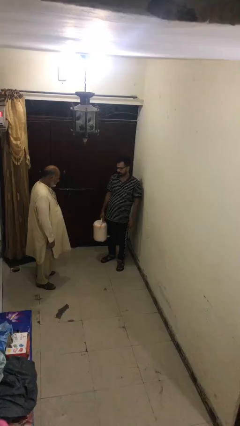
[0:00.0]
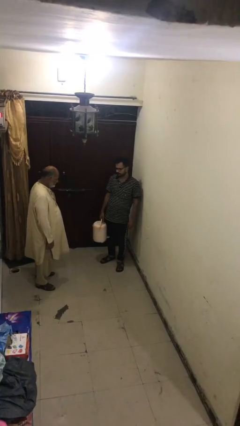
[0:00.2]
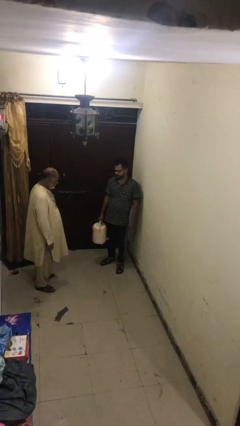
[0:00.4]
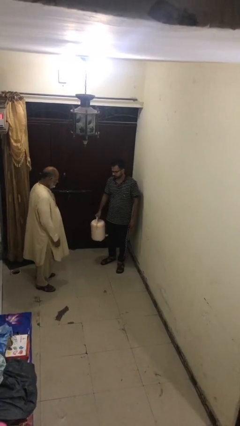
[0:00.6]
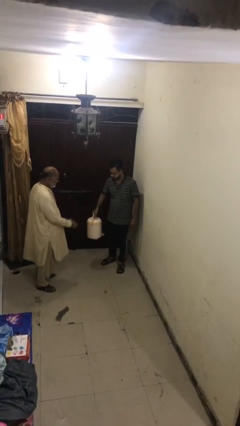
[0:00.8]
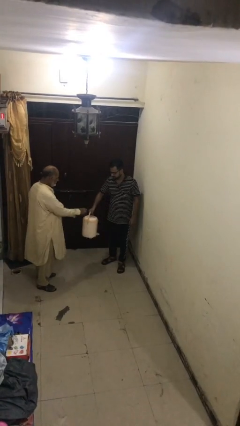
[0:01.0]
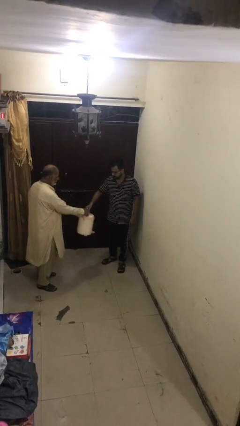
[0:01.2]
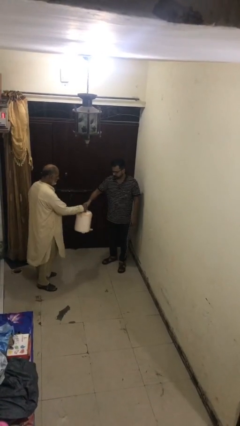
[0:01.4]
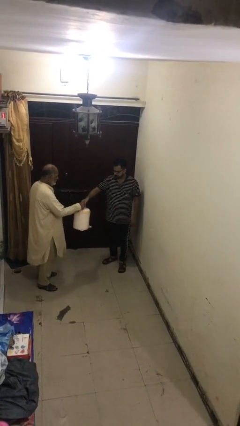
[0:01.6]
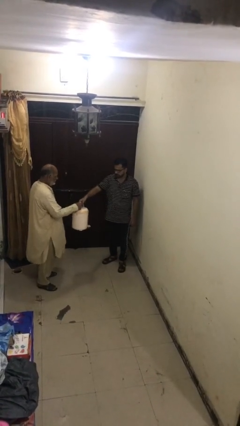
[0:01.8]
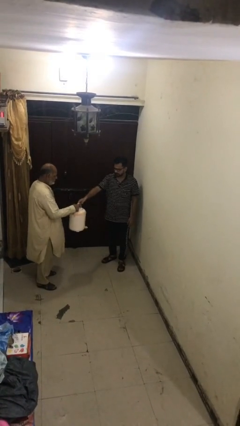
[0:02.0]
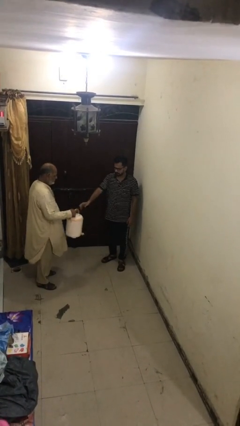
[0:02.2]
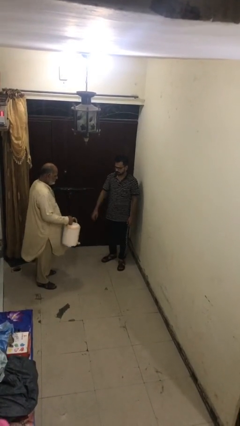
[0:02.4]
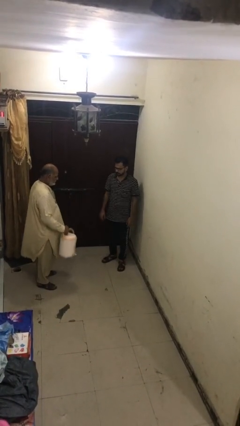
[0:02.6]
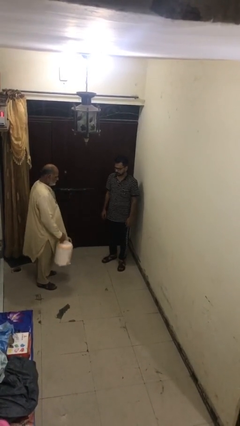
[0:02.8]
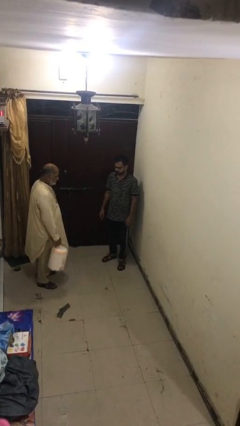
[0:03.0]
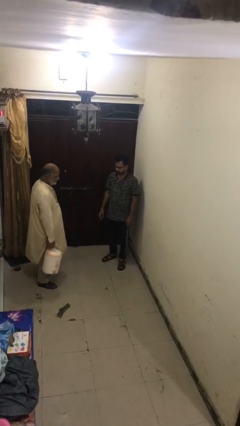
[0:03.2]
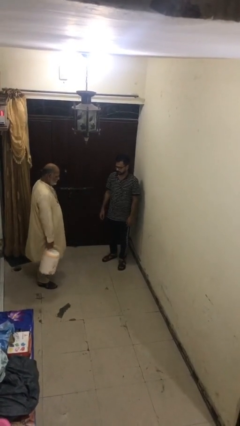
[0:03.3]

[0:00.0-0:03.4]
person transfers object to person

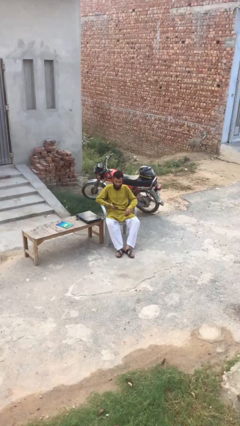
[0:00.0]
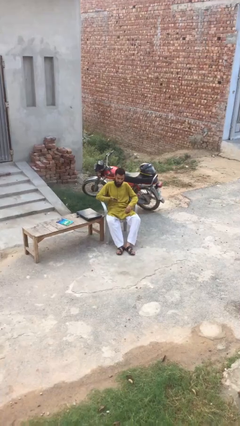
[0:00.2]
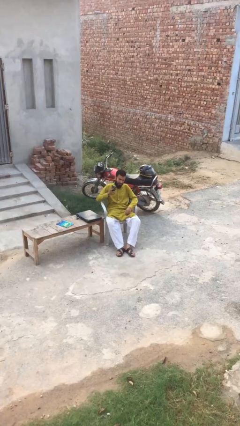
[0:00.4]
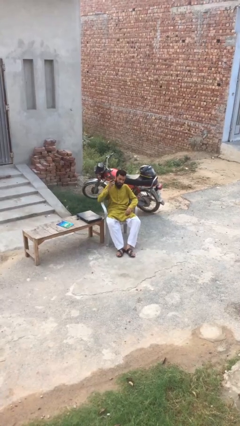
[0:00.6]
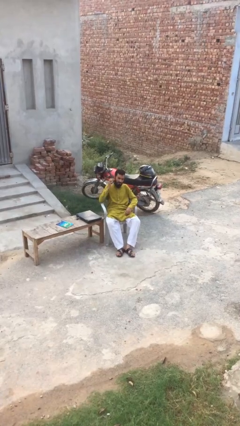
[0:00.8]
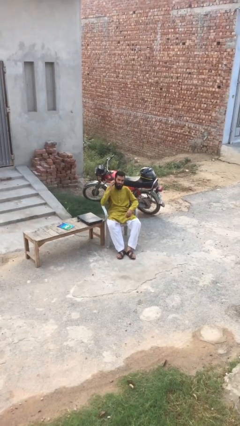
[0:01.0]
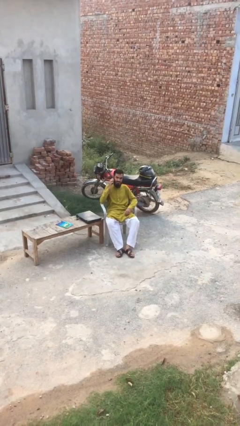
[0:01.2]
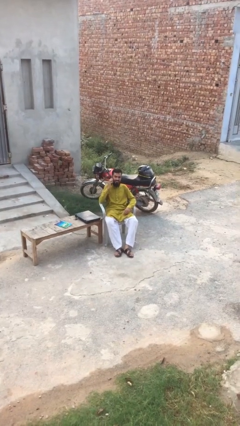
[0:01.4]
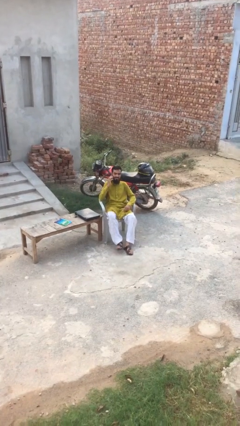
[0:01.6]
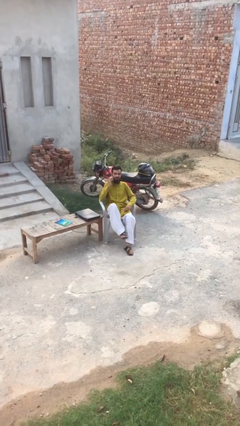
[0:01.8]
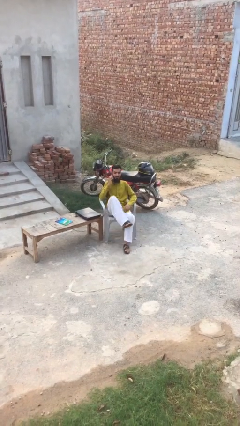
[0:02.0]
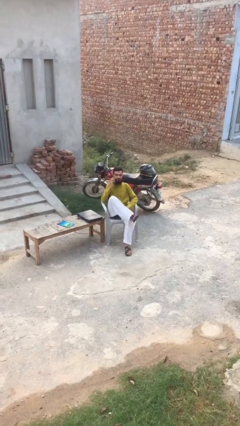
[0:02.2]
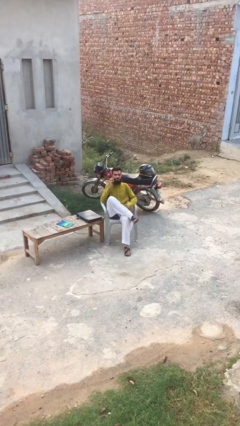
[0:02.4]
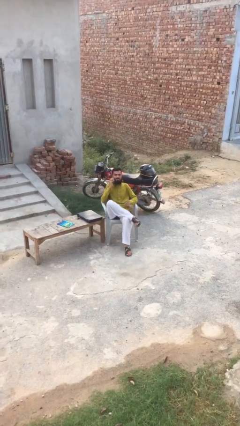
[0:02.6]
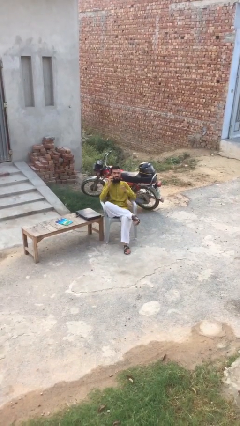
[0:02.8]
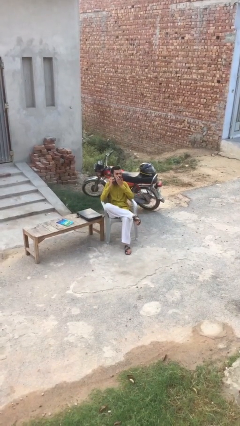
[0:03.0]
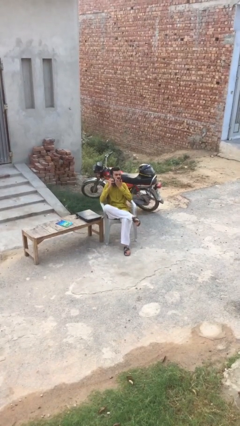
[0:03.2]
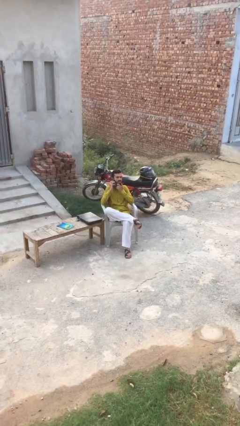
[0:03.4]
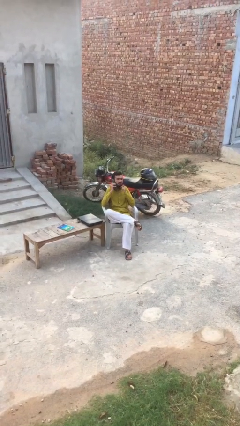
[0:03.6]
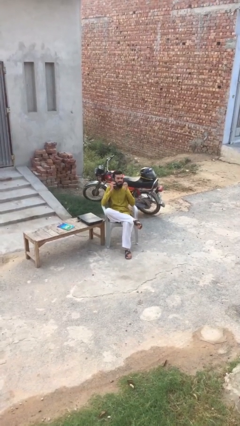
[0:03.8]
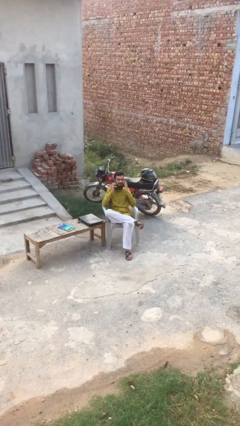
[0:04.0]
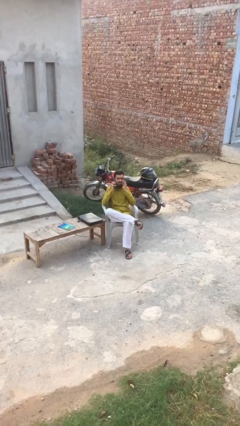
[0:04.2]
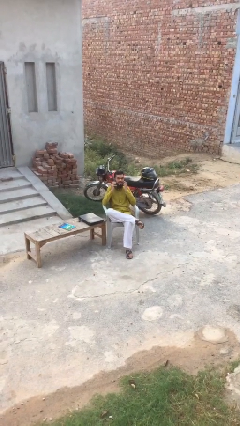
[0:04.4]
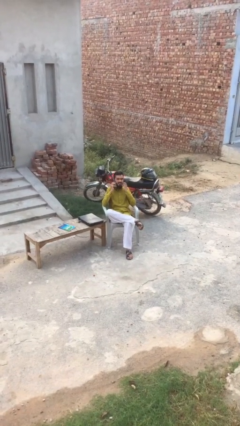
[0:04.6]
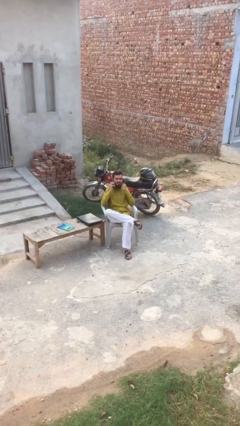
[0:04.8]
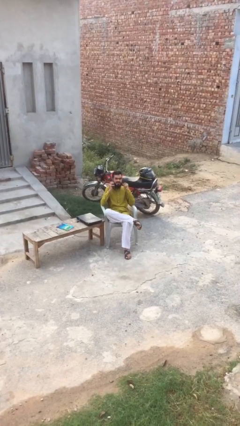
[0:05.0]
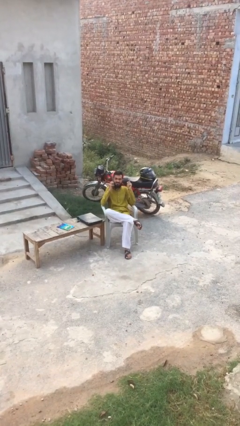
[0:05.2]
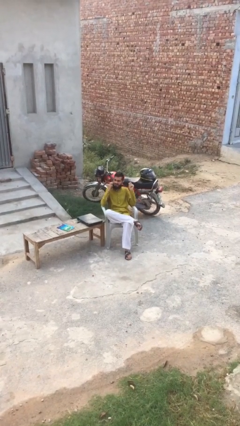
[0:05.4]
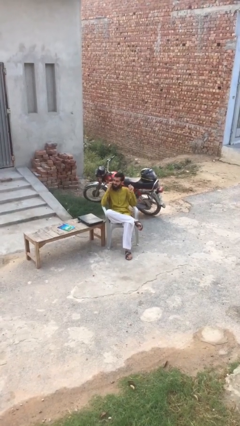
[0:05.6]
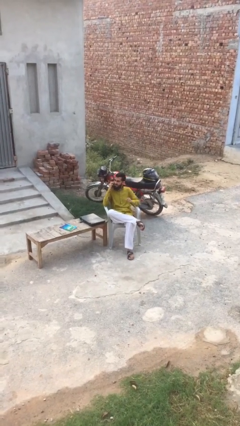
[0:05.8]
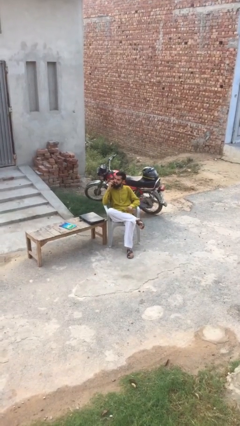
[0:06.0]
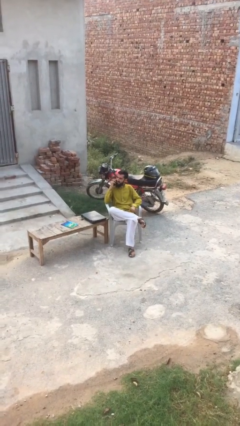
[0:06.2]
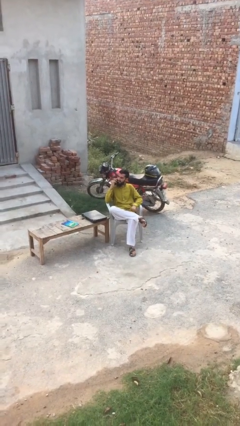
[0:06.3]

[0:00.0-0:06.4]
person talks on phone

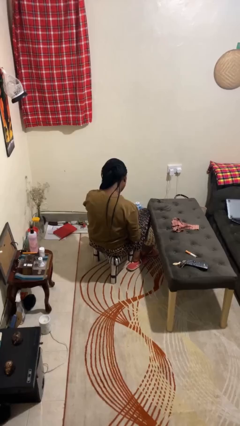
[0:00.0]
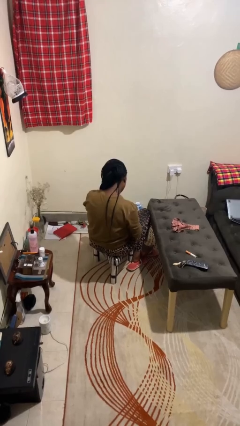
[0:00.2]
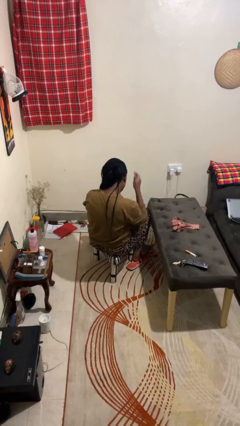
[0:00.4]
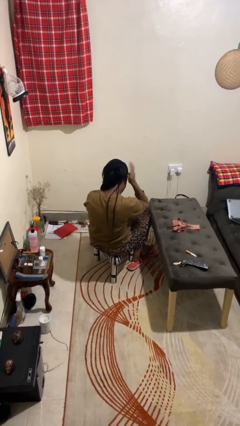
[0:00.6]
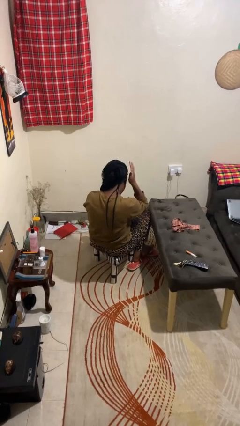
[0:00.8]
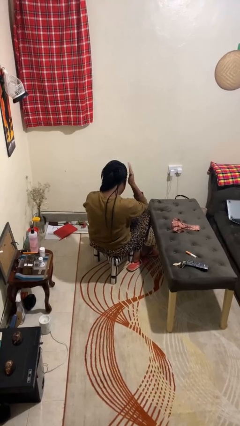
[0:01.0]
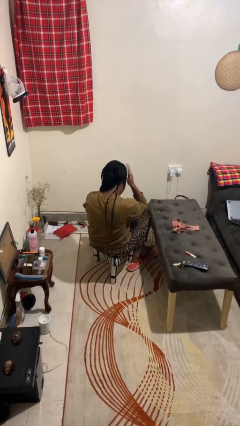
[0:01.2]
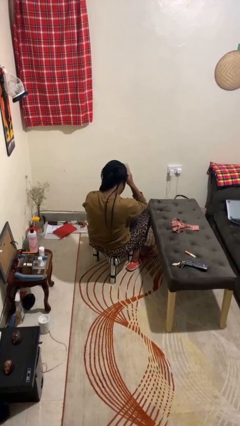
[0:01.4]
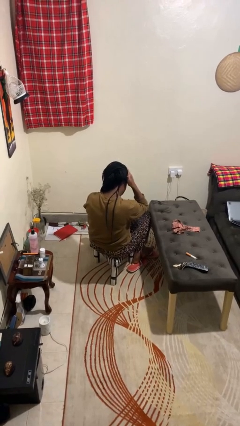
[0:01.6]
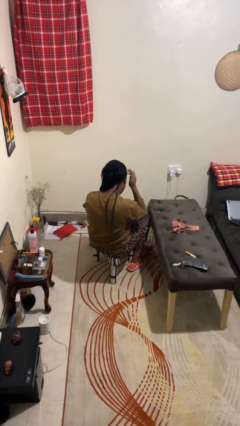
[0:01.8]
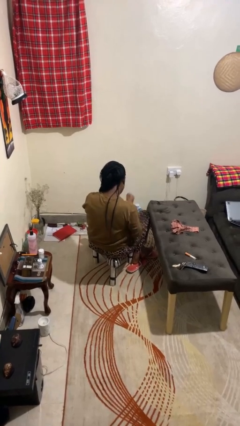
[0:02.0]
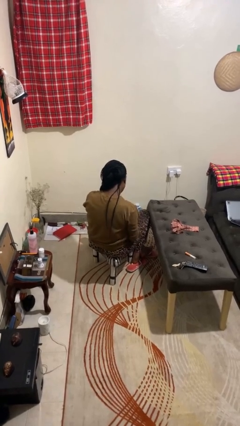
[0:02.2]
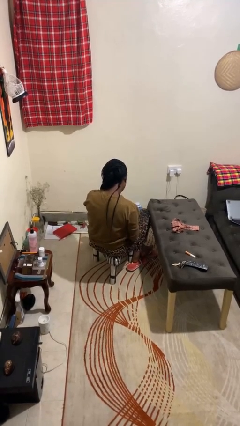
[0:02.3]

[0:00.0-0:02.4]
person pats head

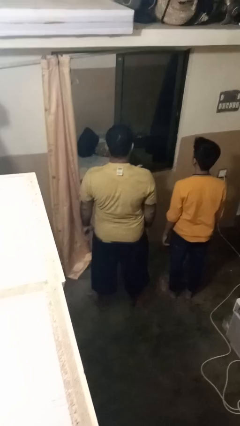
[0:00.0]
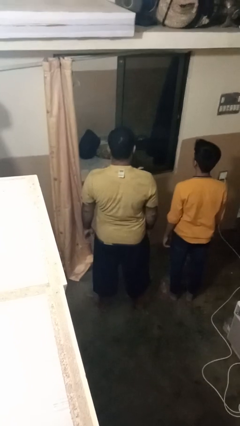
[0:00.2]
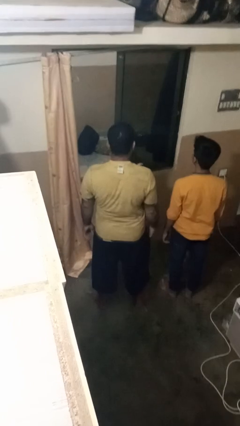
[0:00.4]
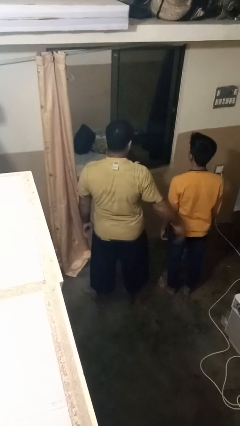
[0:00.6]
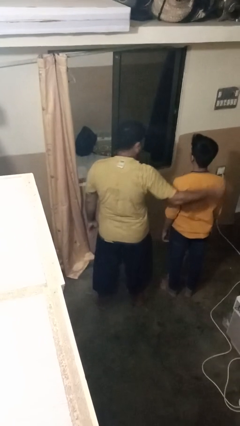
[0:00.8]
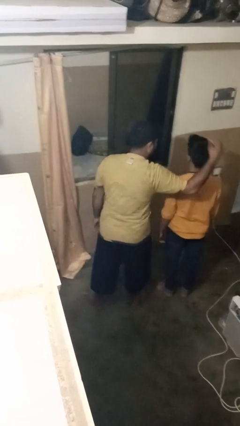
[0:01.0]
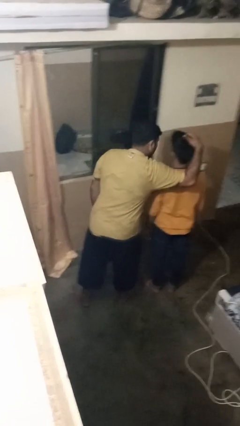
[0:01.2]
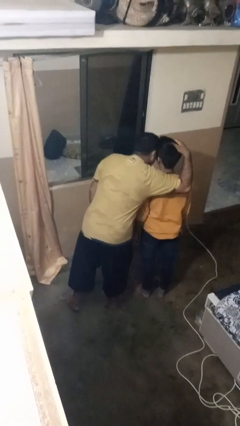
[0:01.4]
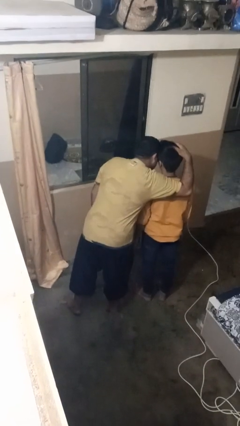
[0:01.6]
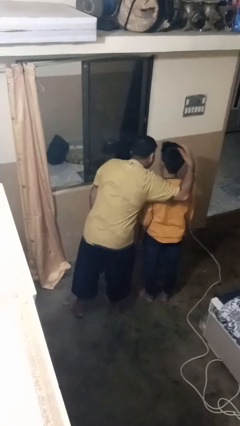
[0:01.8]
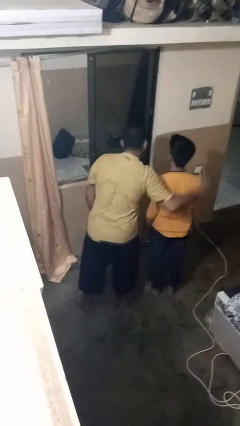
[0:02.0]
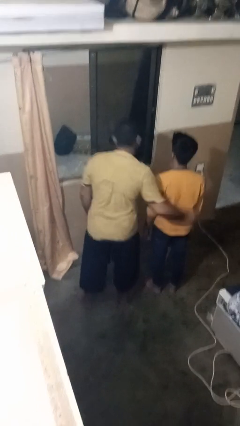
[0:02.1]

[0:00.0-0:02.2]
person kisses cheek of person

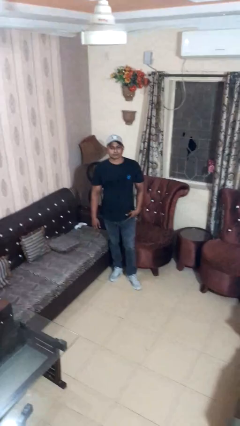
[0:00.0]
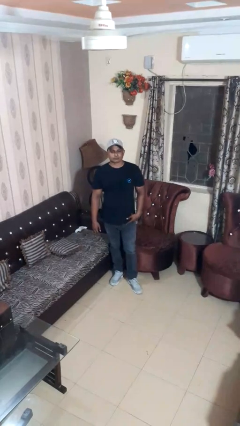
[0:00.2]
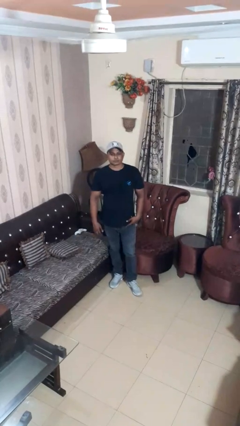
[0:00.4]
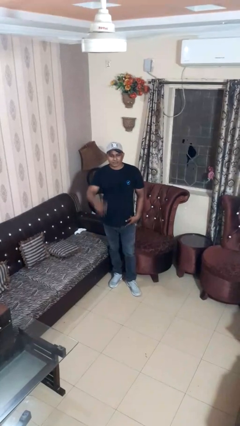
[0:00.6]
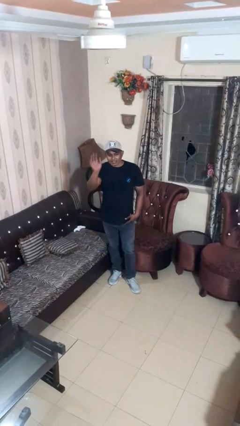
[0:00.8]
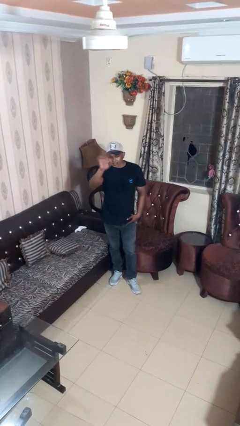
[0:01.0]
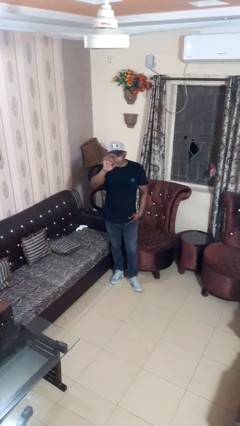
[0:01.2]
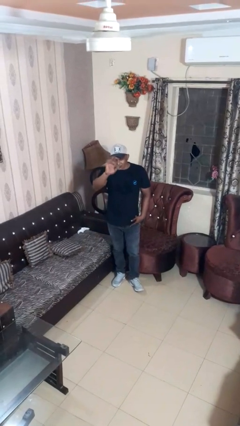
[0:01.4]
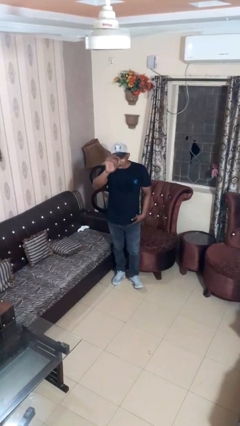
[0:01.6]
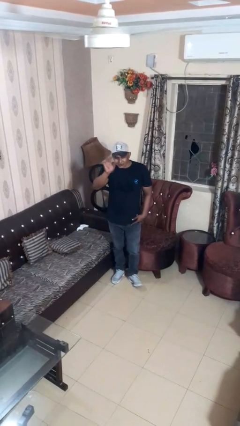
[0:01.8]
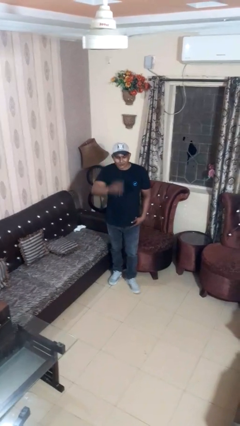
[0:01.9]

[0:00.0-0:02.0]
person waves at person

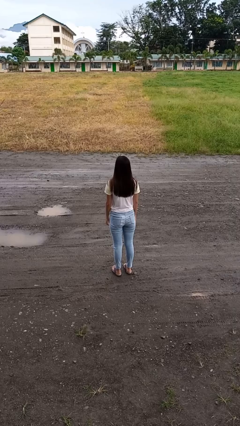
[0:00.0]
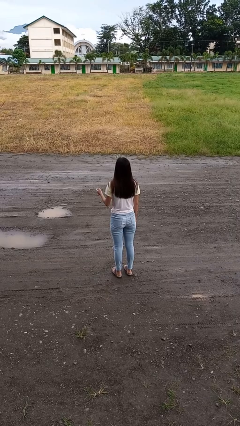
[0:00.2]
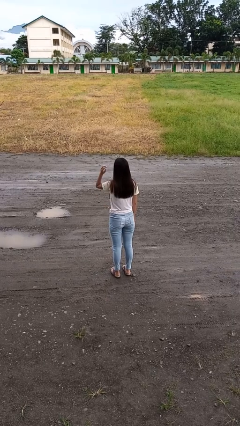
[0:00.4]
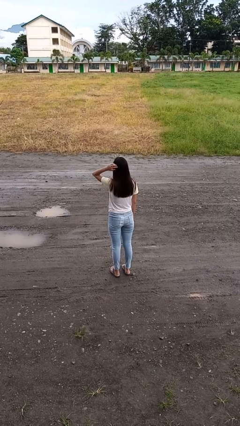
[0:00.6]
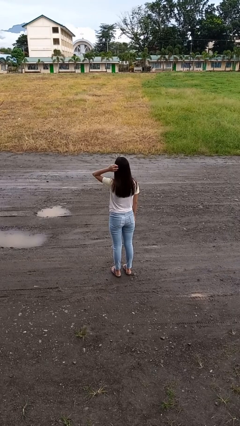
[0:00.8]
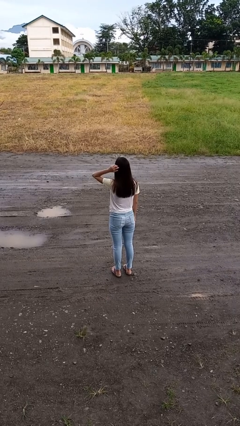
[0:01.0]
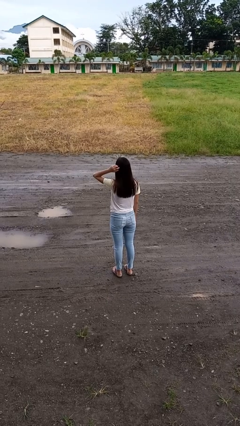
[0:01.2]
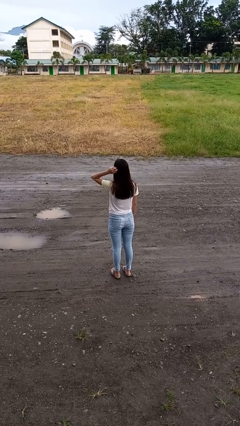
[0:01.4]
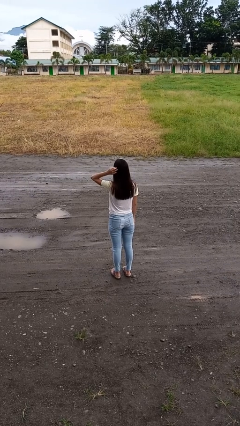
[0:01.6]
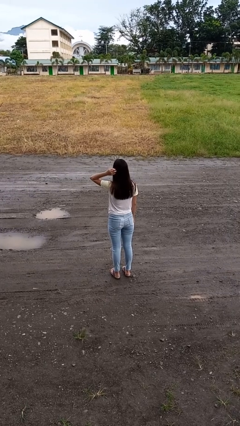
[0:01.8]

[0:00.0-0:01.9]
person scratches face
